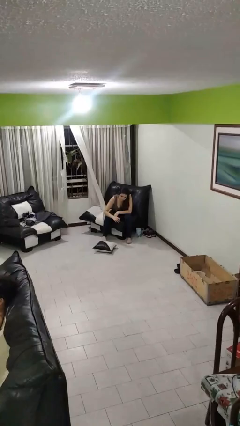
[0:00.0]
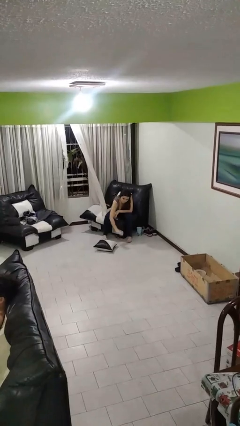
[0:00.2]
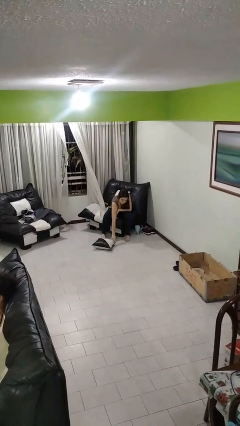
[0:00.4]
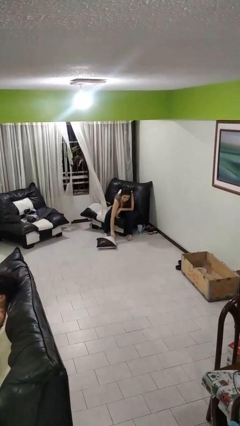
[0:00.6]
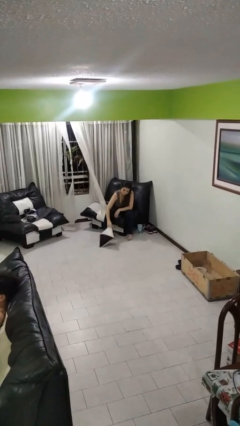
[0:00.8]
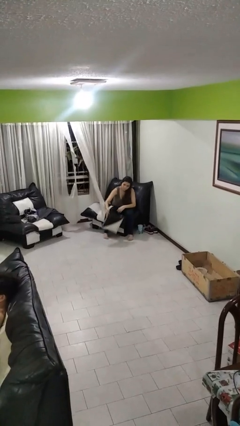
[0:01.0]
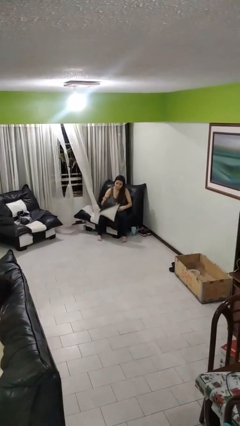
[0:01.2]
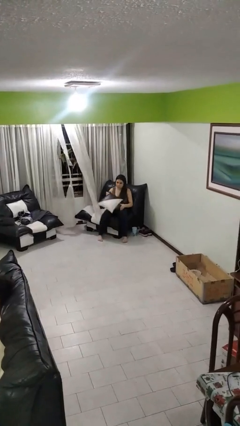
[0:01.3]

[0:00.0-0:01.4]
person picks up object from floor

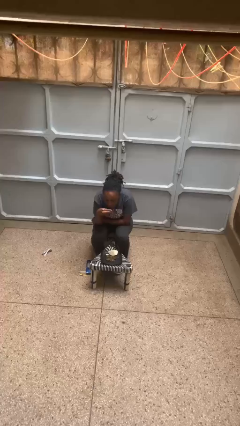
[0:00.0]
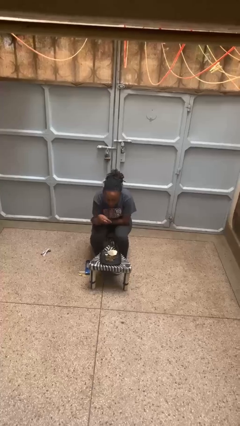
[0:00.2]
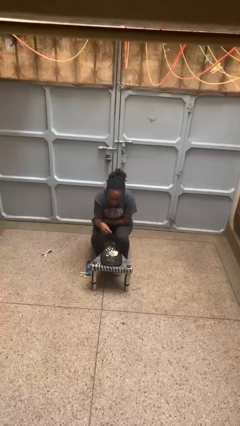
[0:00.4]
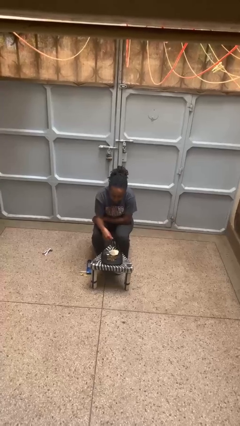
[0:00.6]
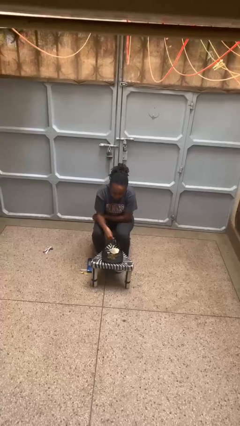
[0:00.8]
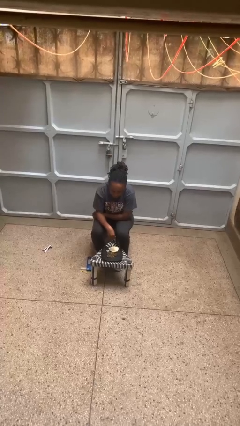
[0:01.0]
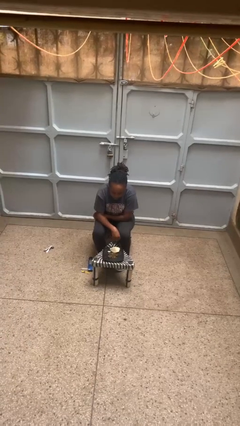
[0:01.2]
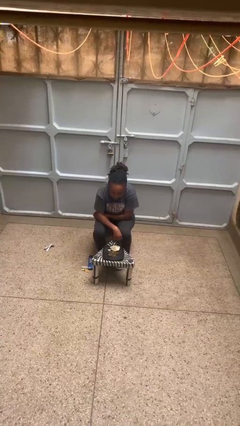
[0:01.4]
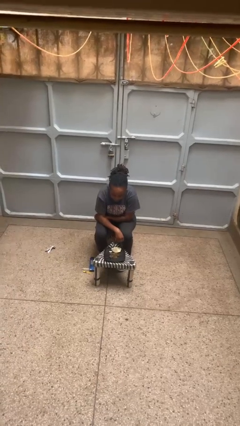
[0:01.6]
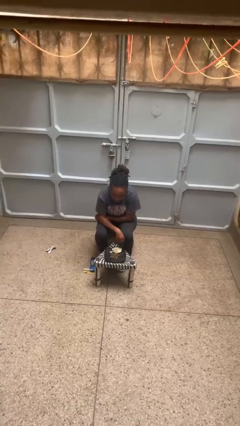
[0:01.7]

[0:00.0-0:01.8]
person eats with hands

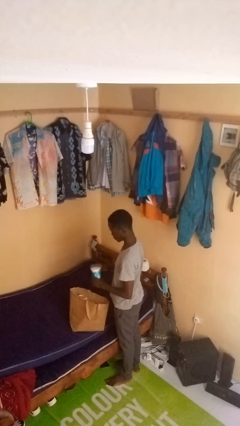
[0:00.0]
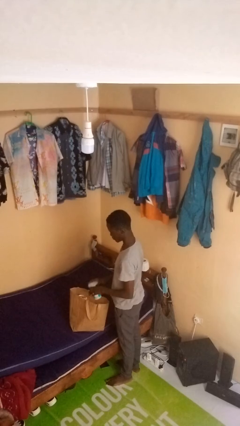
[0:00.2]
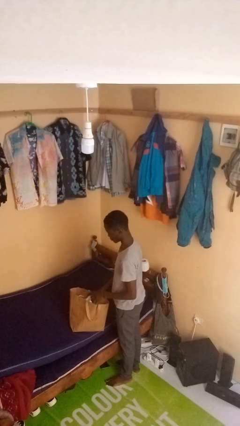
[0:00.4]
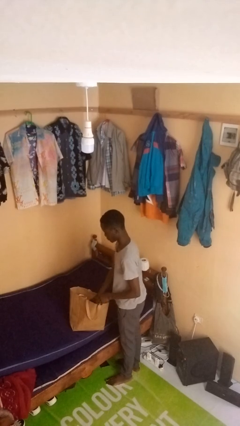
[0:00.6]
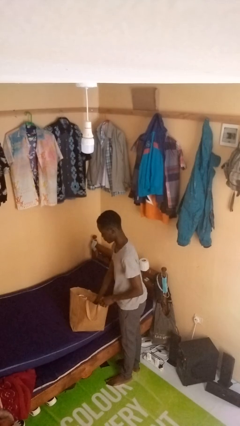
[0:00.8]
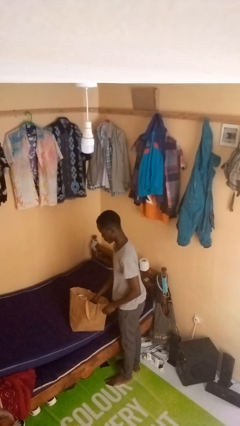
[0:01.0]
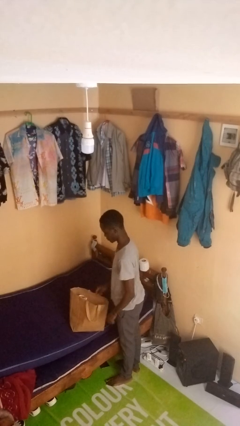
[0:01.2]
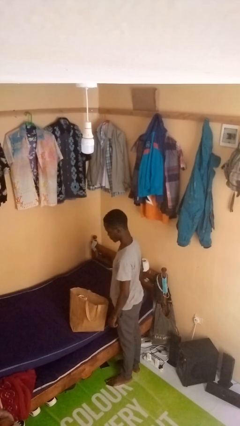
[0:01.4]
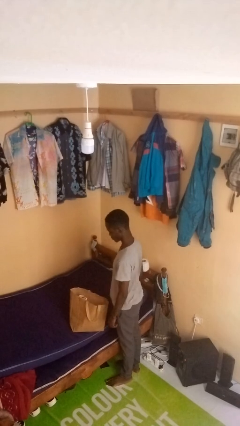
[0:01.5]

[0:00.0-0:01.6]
person puts object into bag

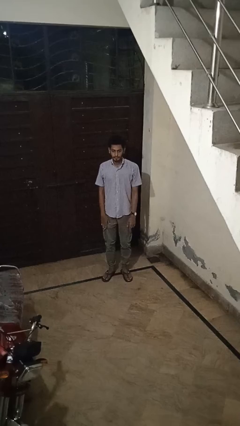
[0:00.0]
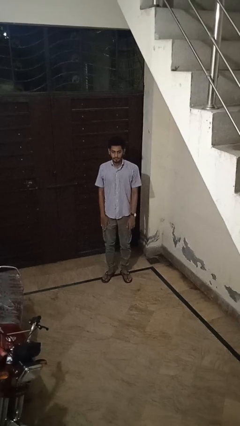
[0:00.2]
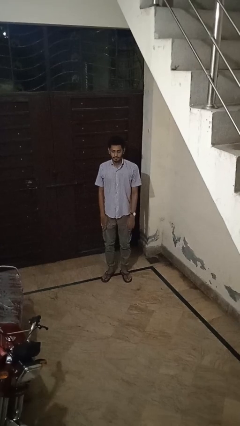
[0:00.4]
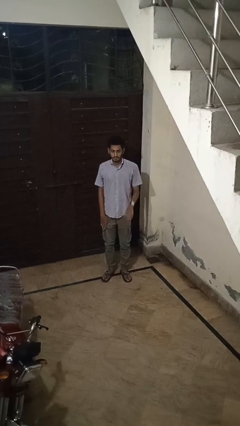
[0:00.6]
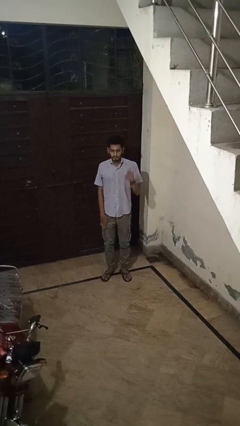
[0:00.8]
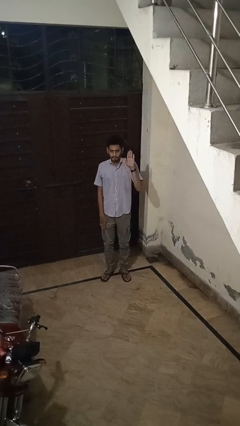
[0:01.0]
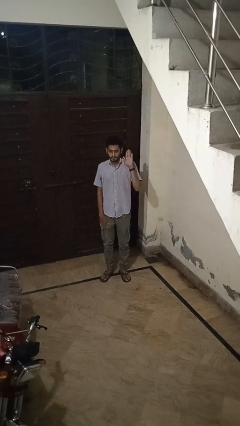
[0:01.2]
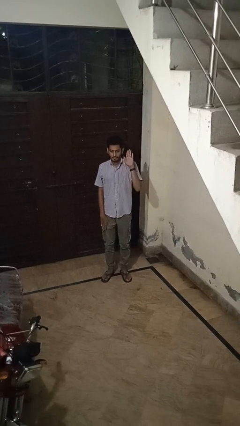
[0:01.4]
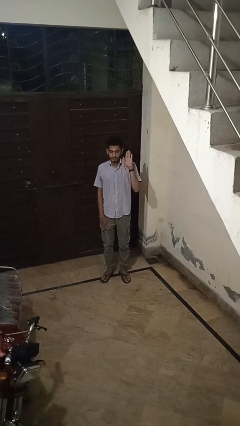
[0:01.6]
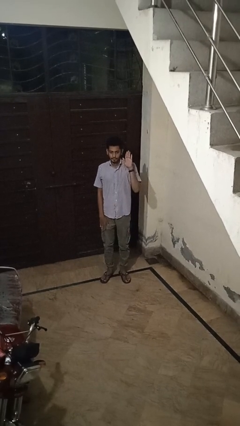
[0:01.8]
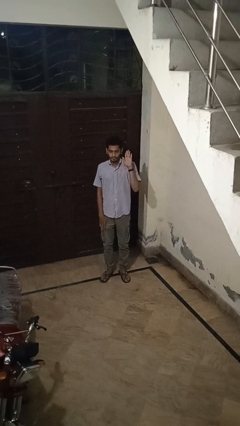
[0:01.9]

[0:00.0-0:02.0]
person gestures raise hand

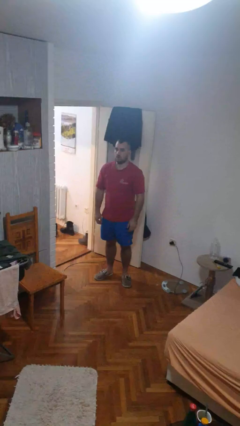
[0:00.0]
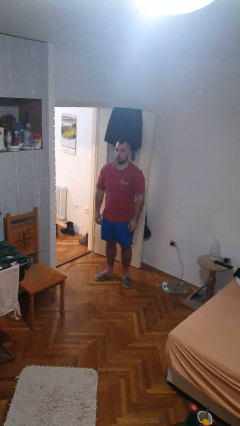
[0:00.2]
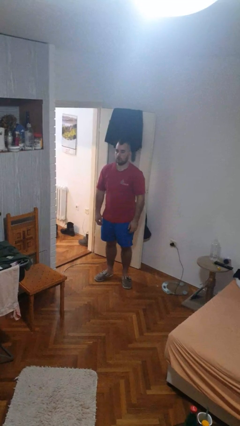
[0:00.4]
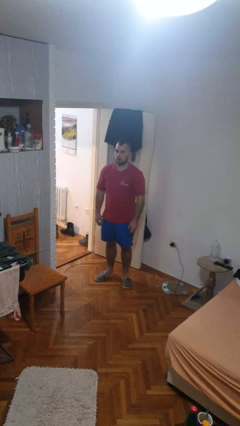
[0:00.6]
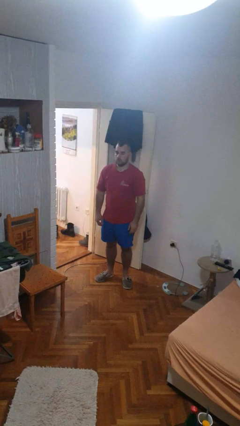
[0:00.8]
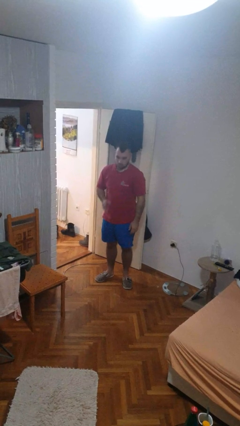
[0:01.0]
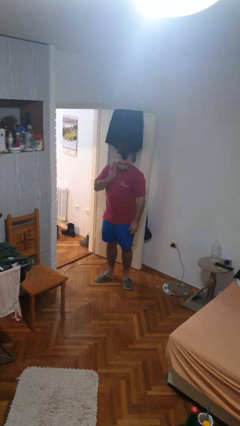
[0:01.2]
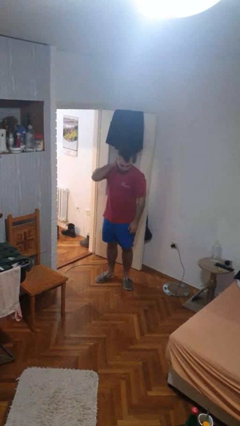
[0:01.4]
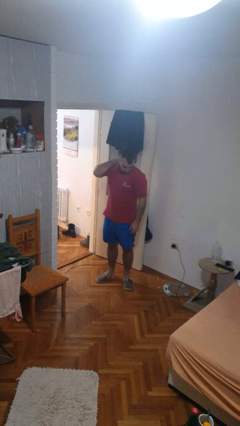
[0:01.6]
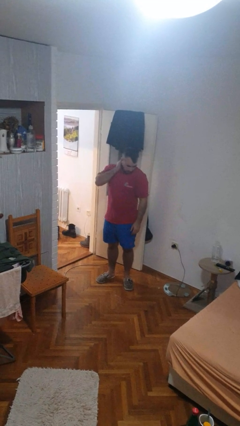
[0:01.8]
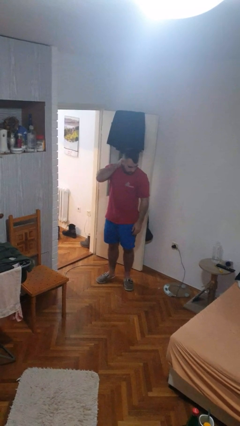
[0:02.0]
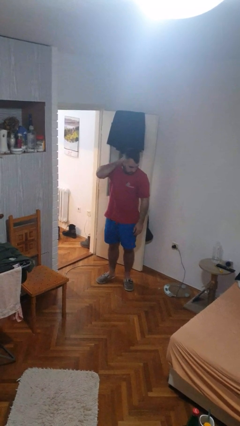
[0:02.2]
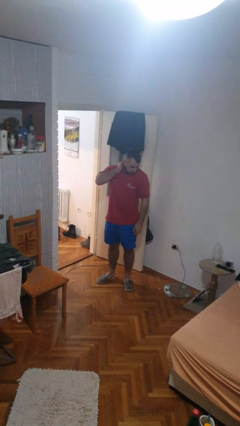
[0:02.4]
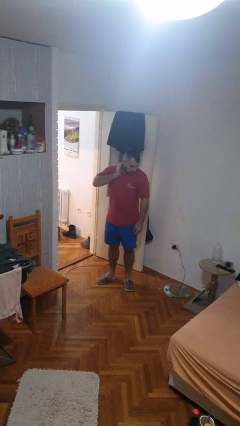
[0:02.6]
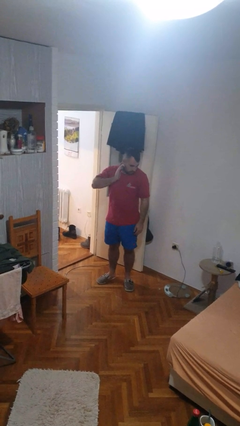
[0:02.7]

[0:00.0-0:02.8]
person rubs neck

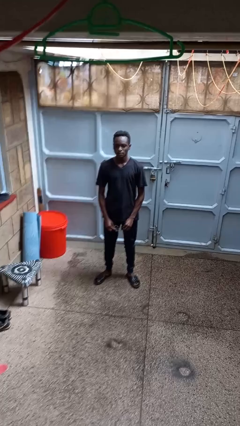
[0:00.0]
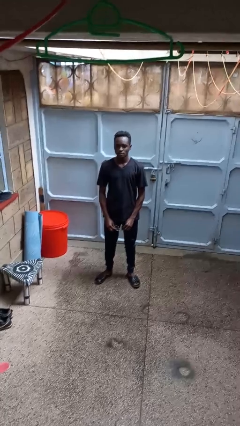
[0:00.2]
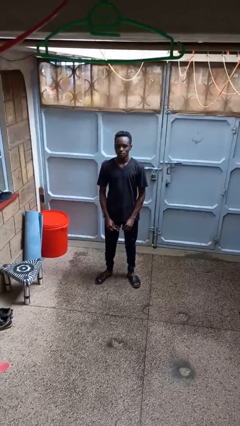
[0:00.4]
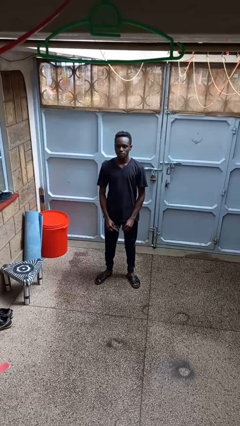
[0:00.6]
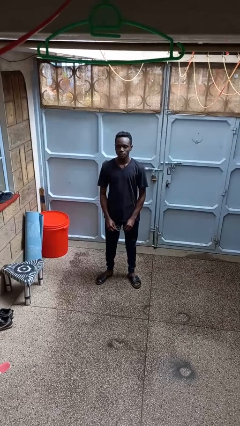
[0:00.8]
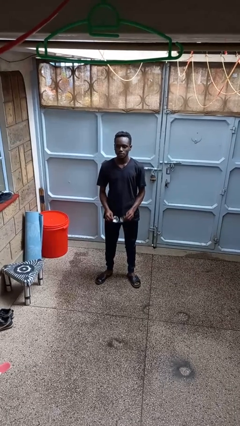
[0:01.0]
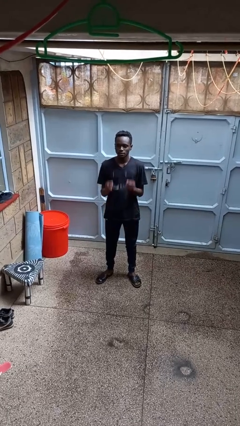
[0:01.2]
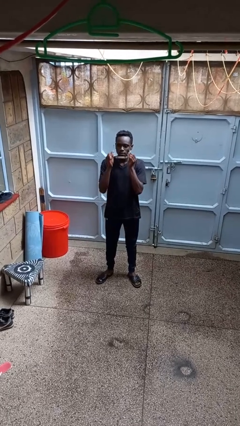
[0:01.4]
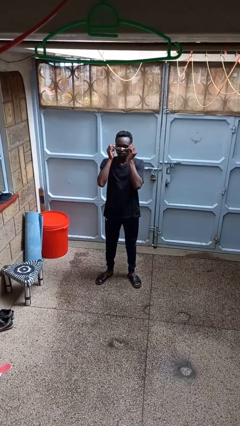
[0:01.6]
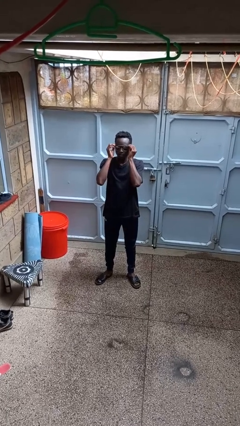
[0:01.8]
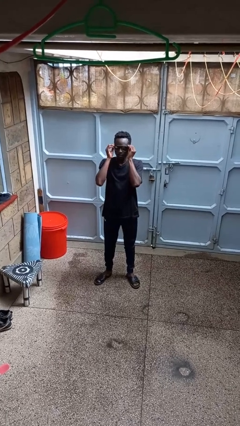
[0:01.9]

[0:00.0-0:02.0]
person puts on sunglasses

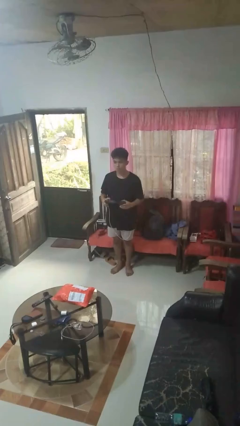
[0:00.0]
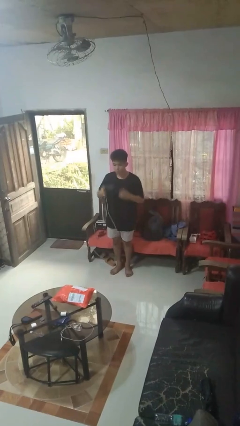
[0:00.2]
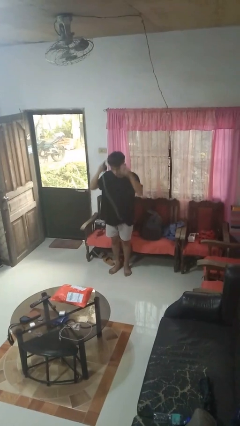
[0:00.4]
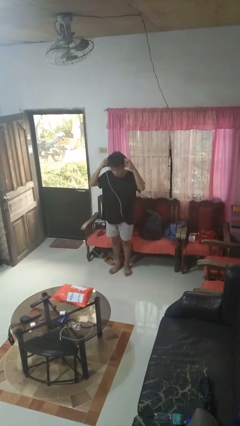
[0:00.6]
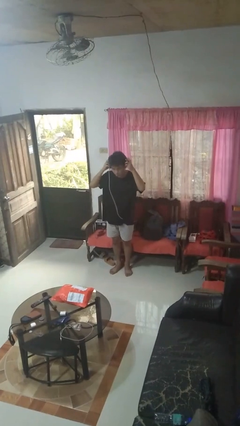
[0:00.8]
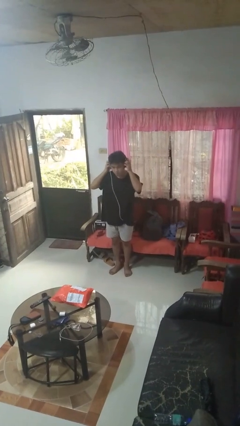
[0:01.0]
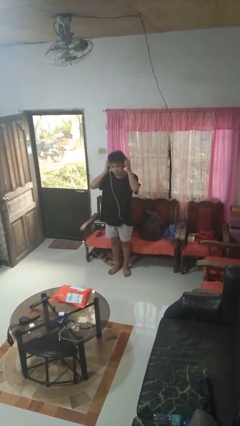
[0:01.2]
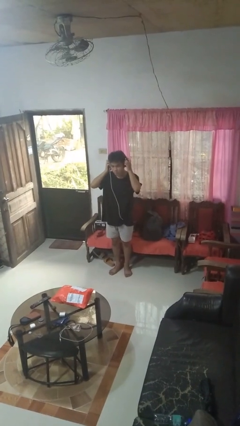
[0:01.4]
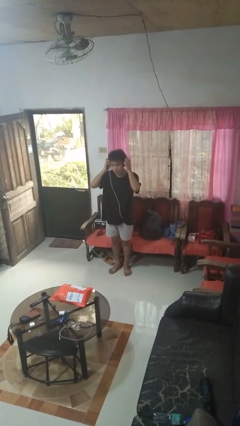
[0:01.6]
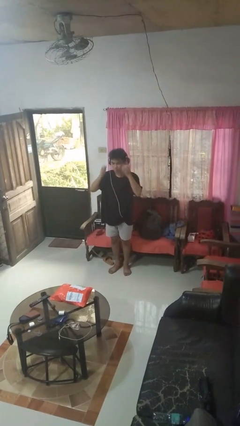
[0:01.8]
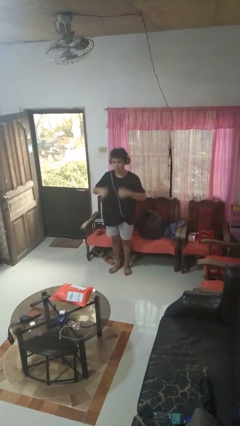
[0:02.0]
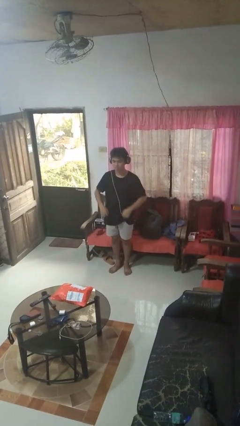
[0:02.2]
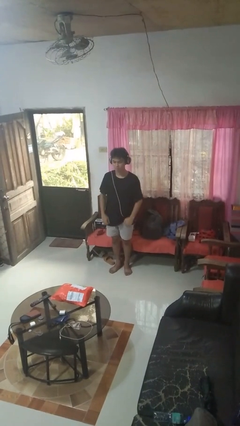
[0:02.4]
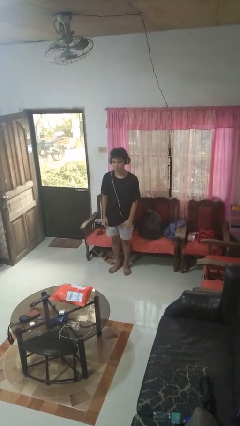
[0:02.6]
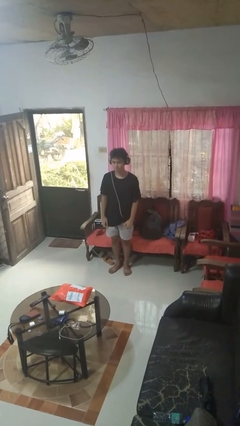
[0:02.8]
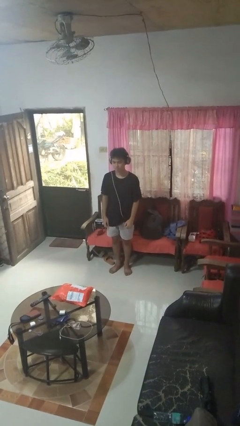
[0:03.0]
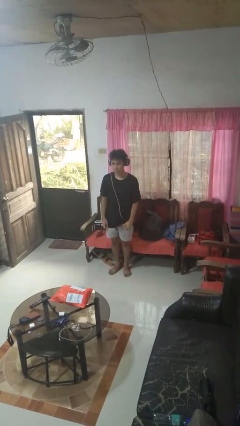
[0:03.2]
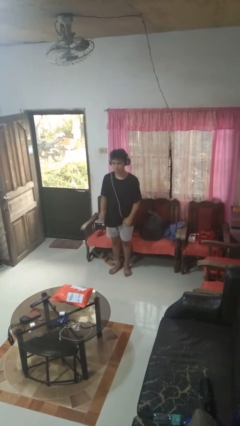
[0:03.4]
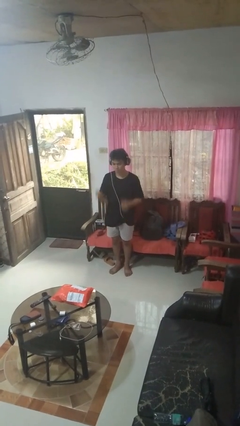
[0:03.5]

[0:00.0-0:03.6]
person puts on headphones

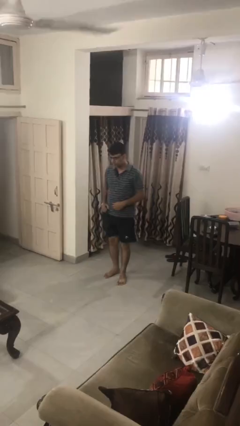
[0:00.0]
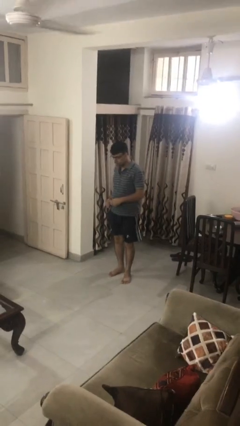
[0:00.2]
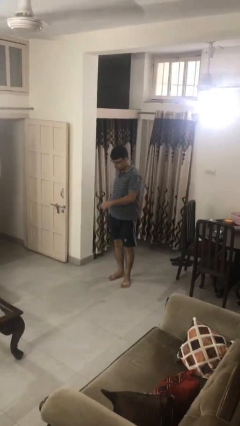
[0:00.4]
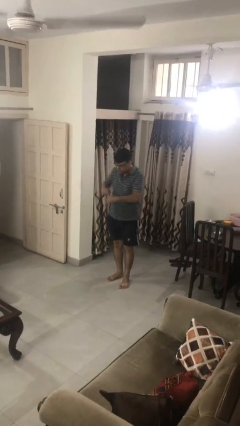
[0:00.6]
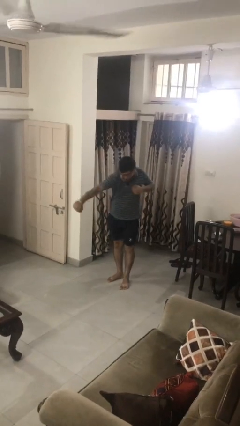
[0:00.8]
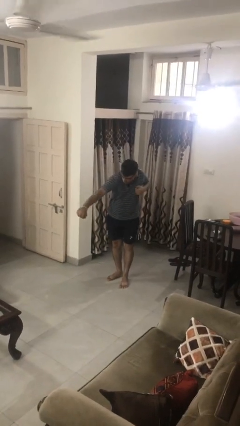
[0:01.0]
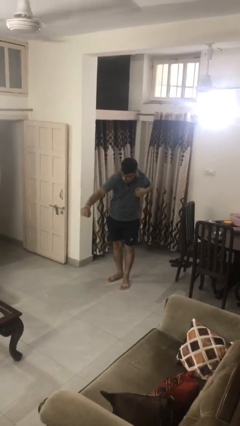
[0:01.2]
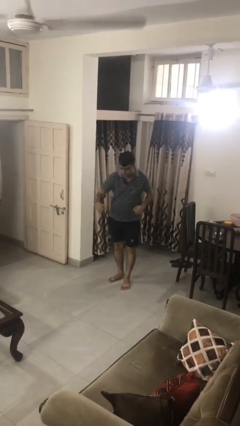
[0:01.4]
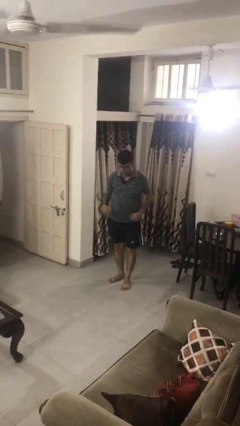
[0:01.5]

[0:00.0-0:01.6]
person karate chop

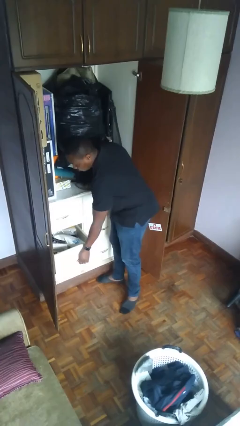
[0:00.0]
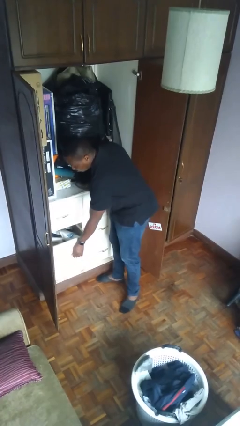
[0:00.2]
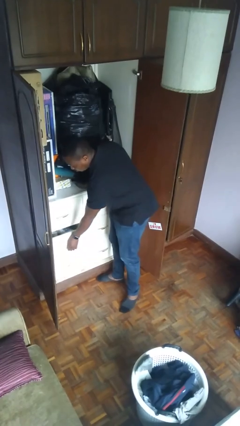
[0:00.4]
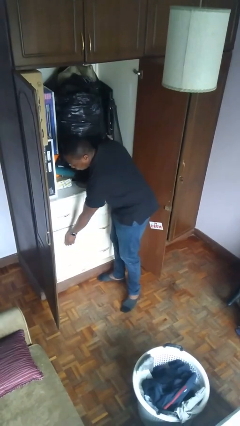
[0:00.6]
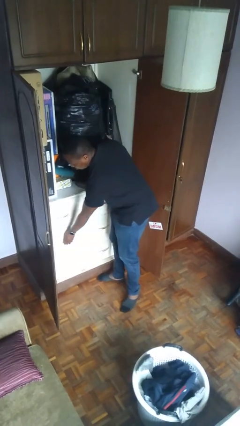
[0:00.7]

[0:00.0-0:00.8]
person closes dresser drawer
